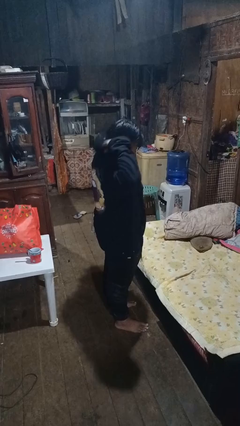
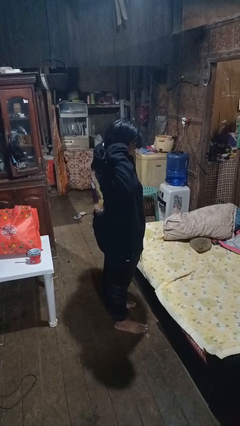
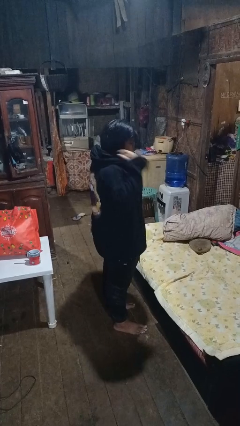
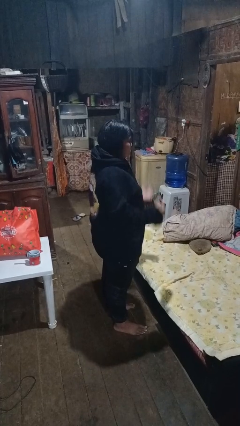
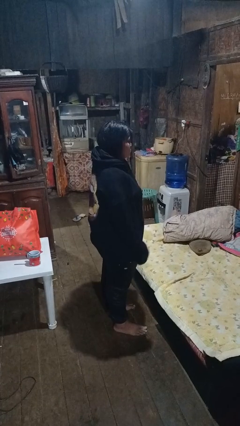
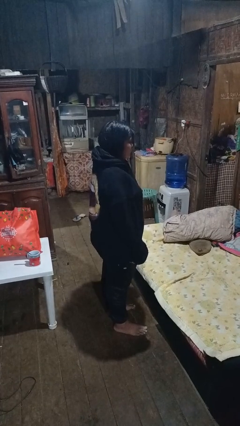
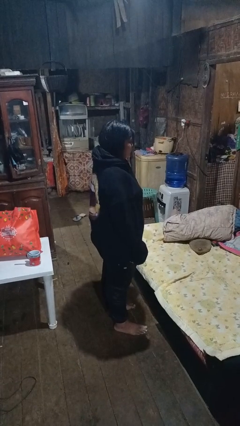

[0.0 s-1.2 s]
person takes off hoodie

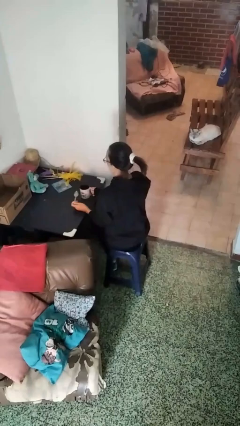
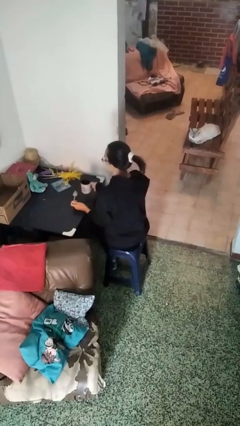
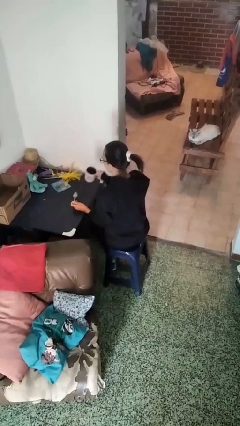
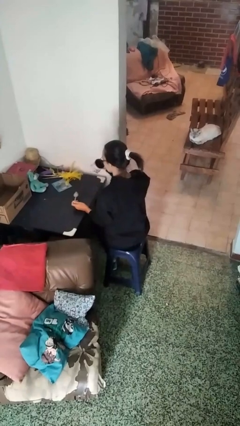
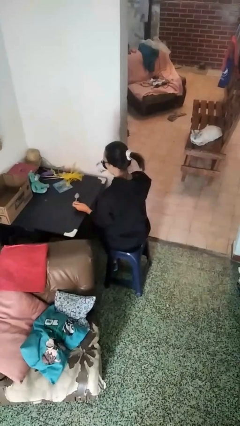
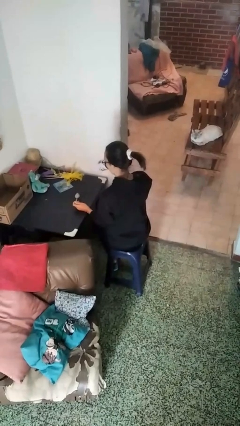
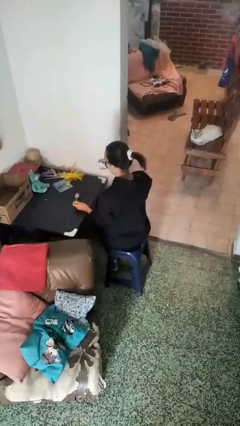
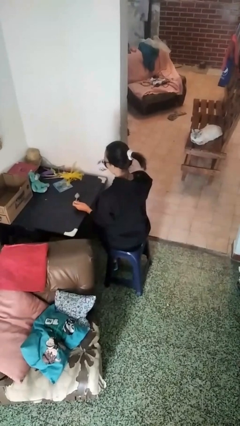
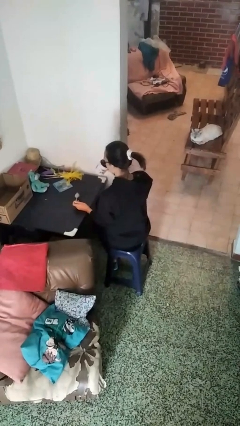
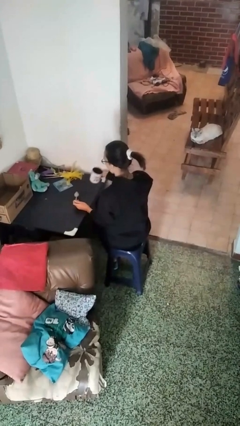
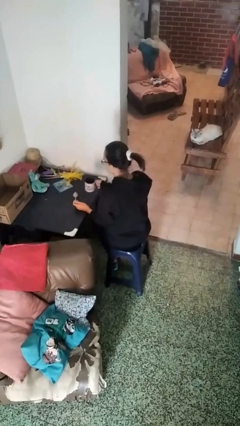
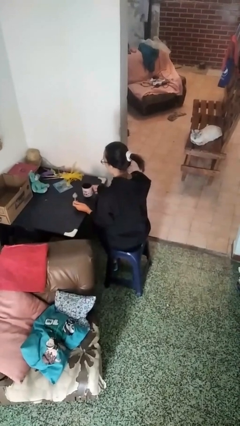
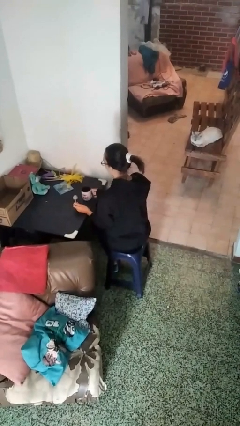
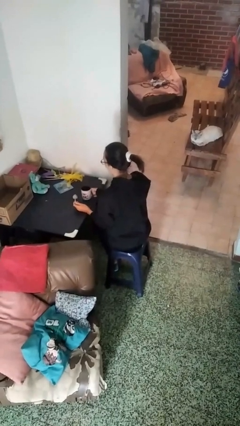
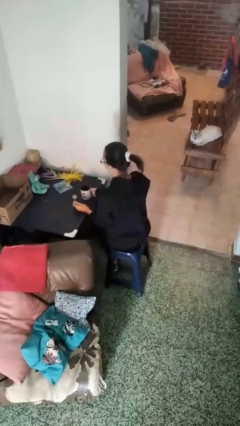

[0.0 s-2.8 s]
person drinks from mug

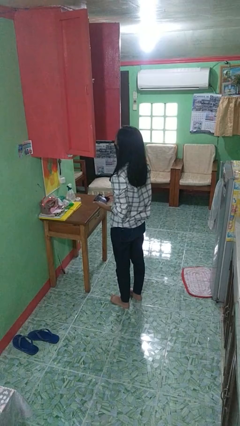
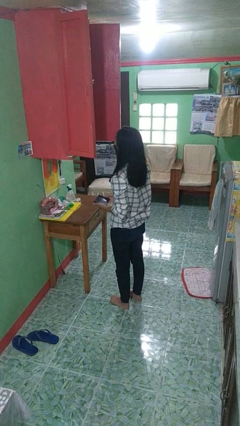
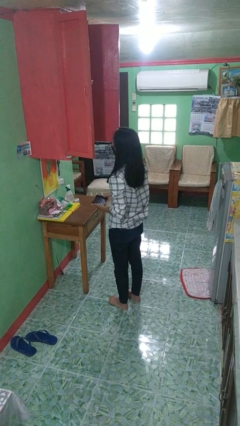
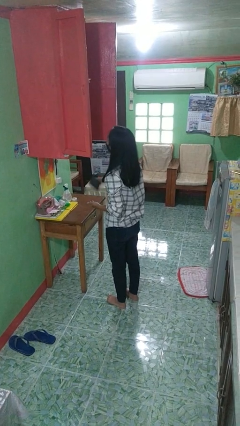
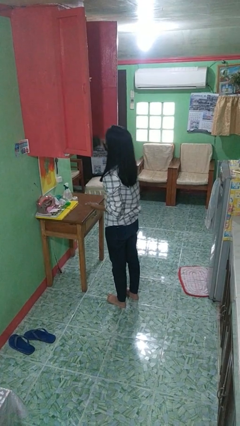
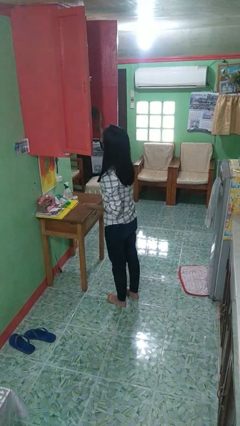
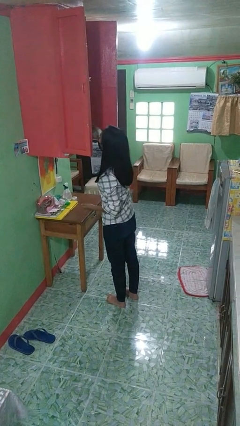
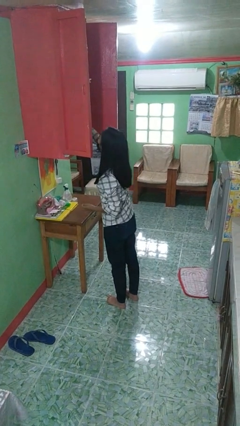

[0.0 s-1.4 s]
person puts down object into cabinet

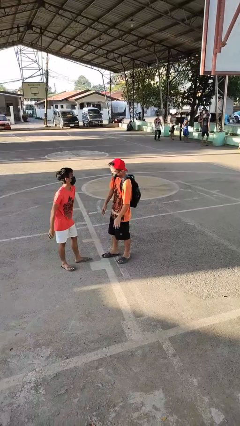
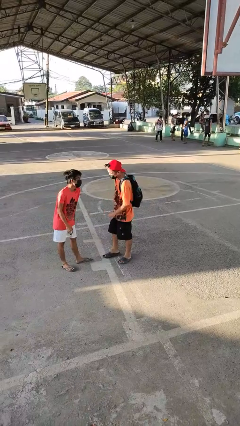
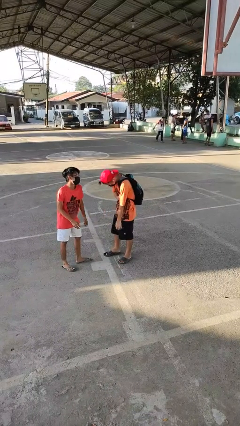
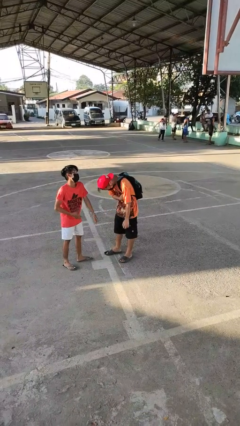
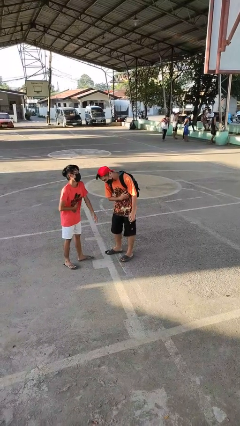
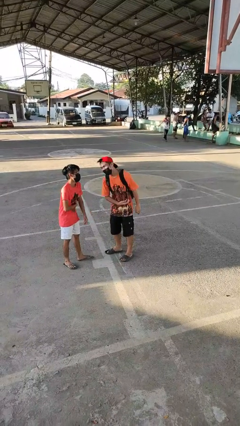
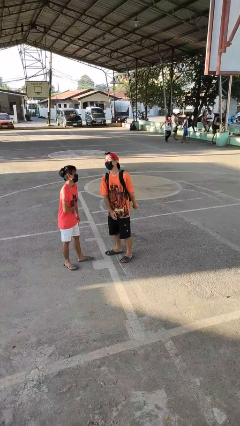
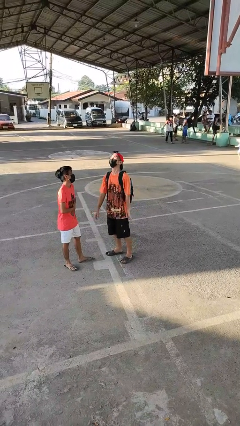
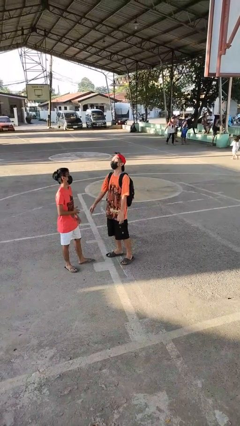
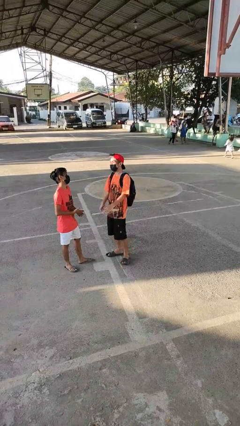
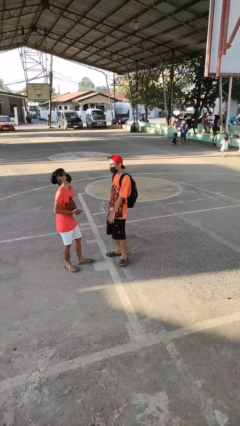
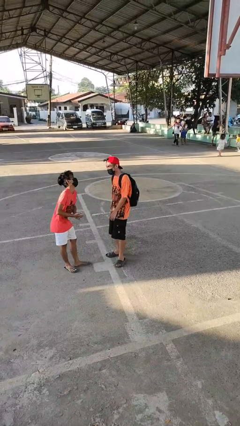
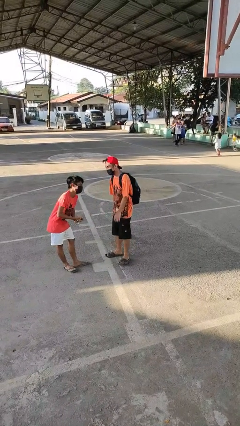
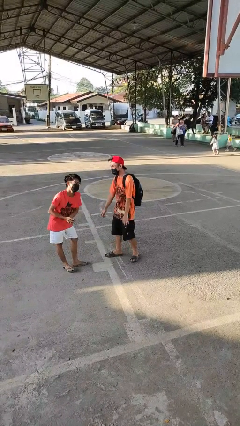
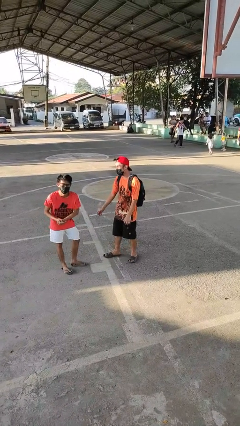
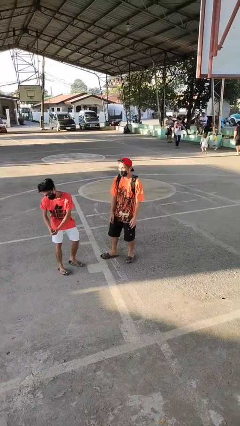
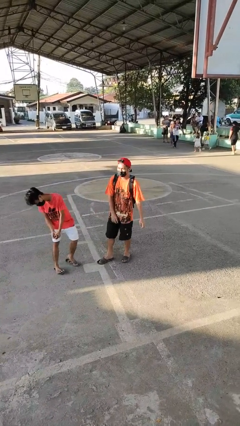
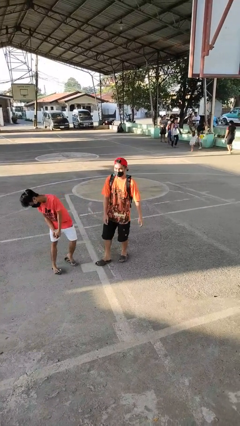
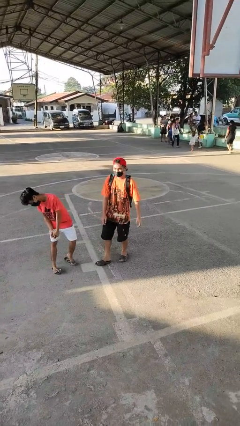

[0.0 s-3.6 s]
person laughs with person

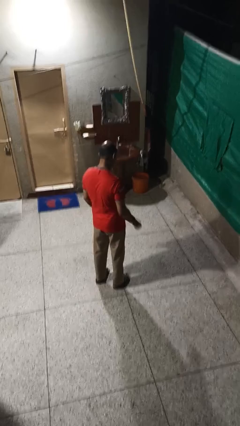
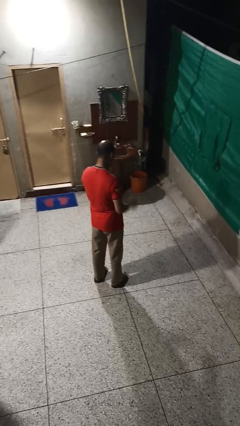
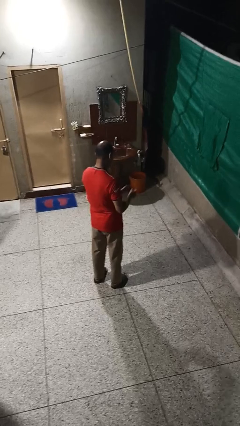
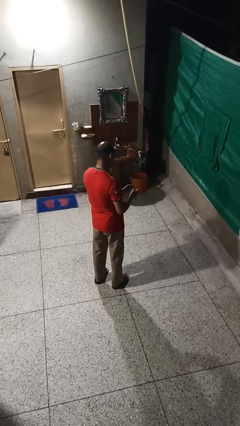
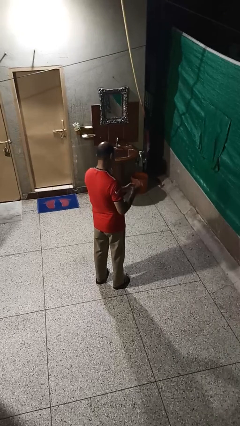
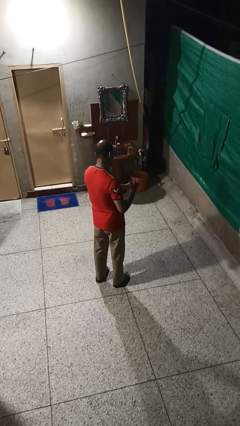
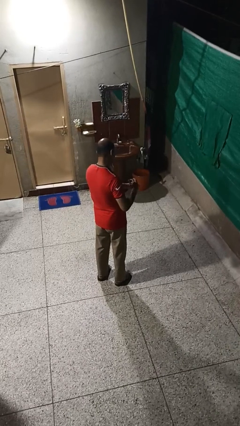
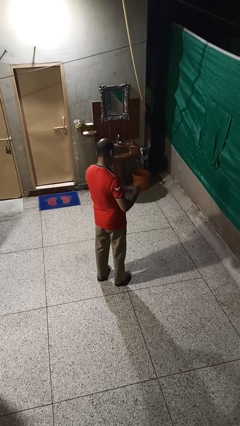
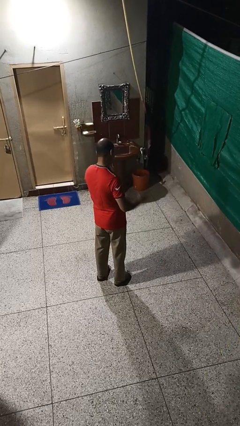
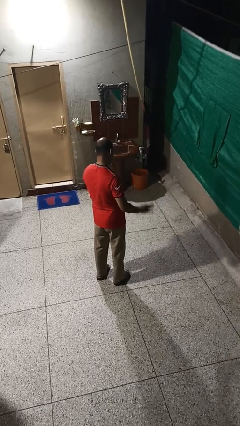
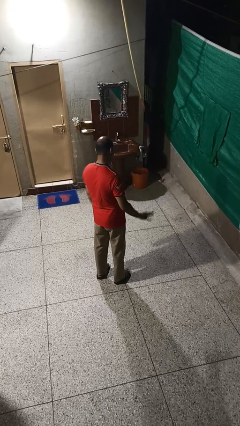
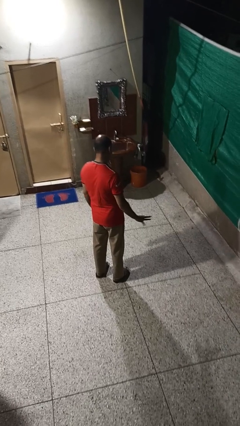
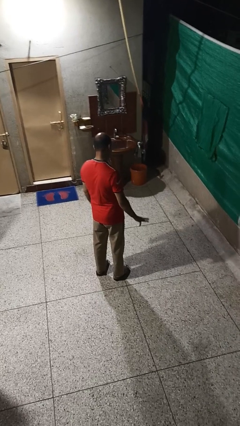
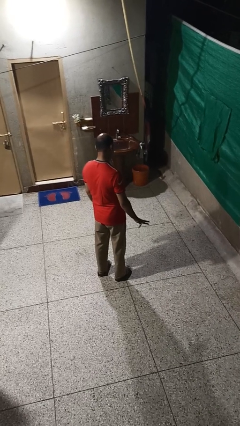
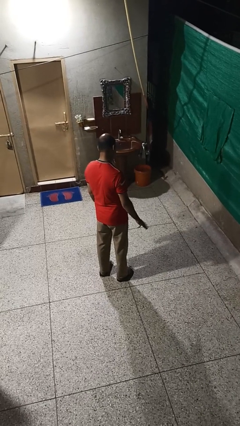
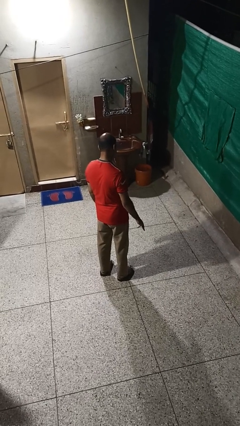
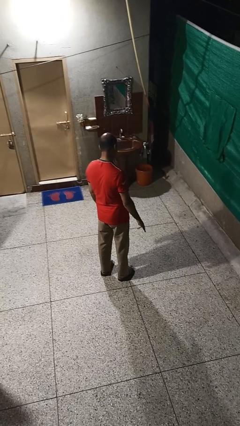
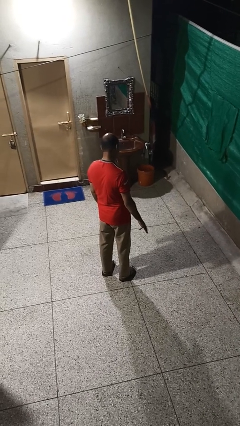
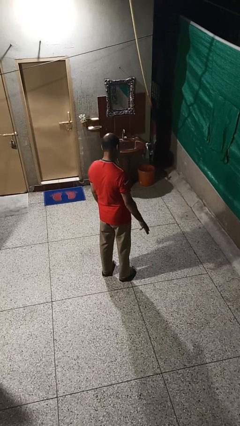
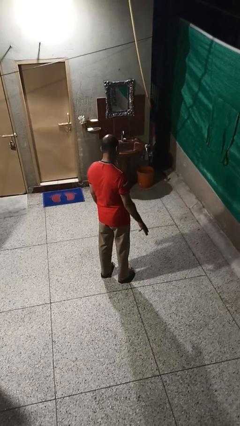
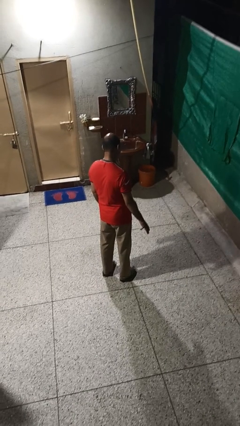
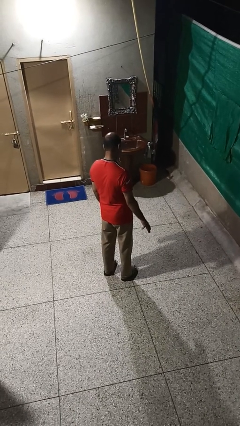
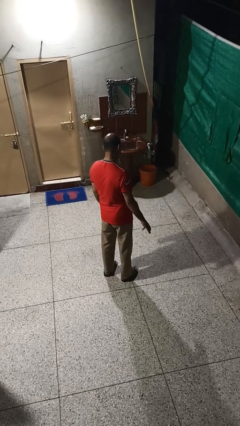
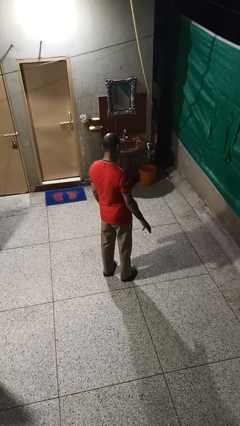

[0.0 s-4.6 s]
person puts on ring

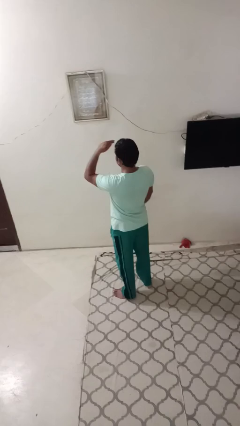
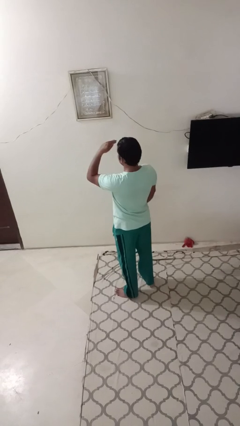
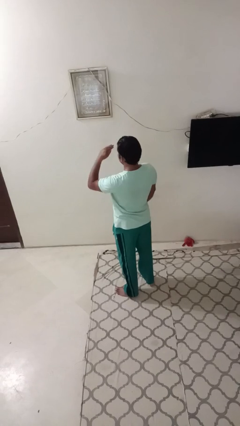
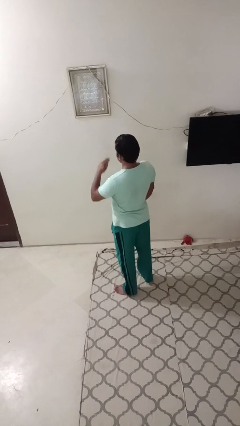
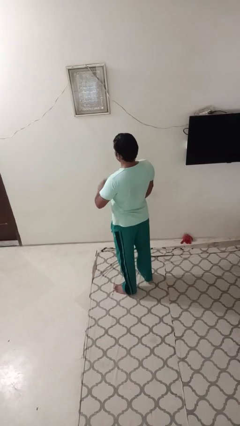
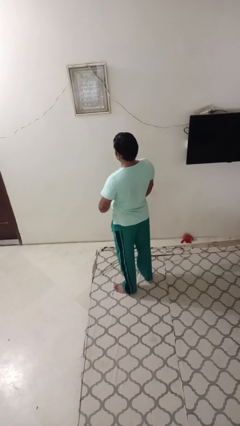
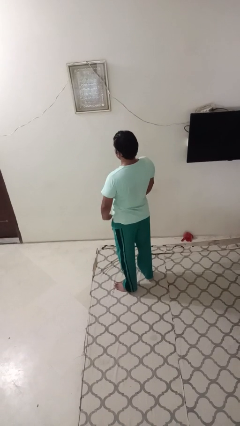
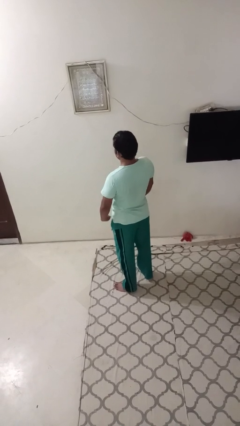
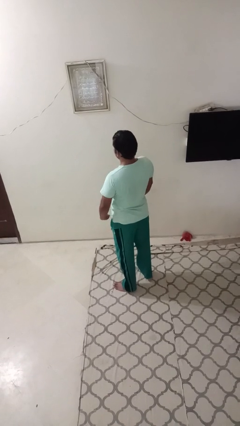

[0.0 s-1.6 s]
person gestures swipe down

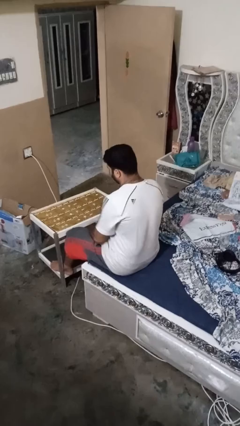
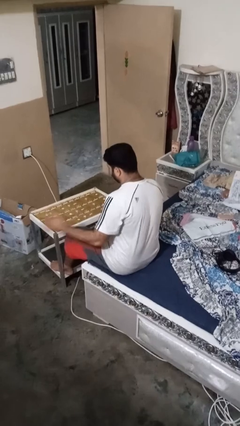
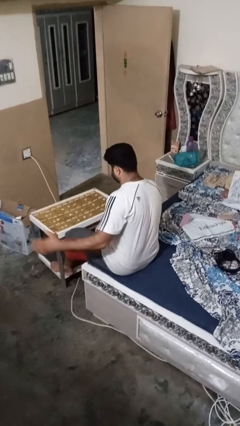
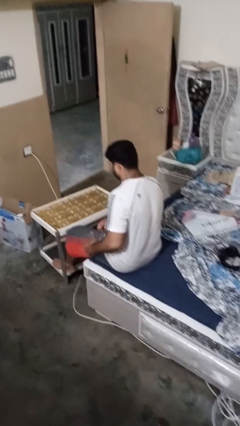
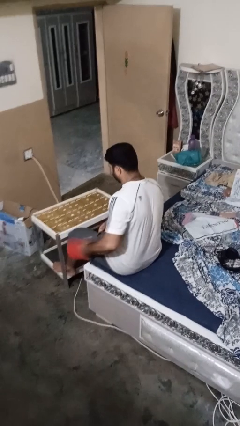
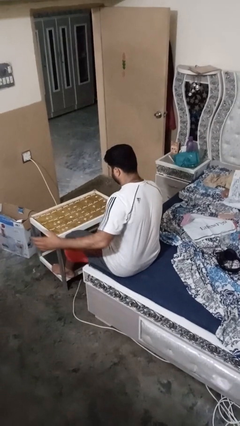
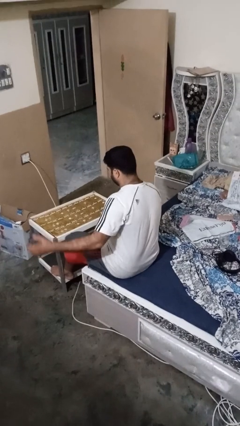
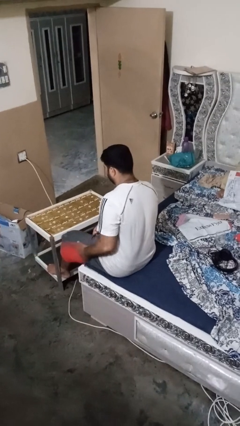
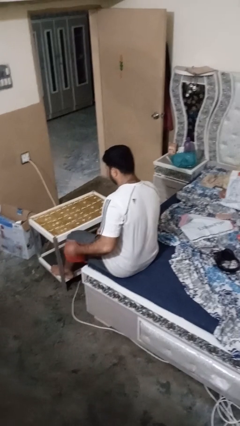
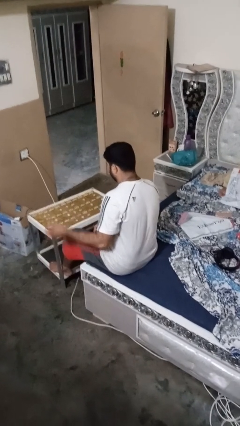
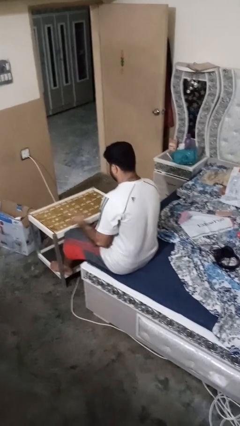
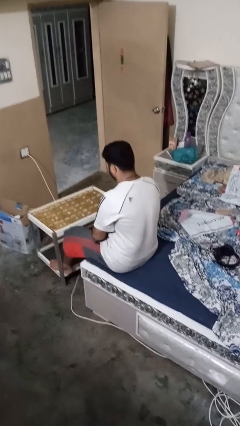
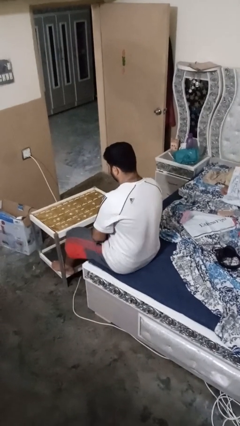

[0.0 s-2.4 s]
person slaps hands on thighs
